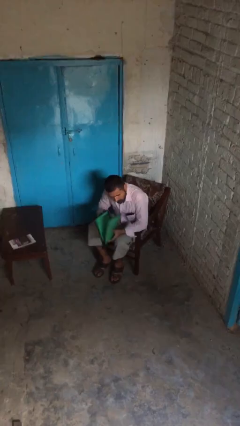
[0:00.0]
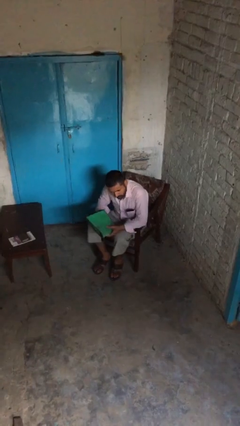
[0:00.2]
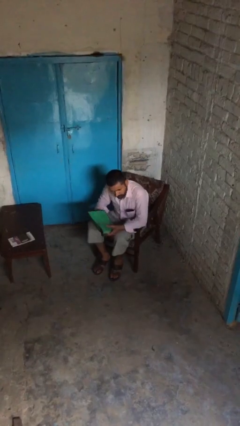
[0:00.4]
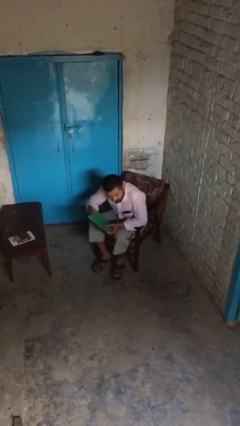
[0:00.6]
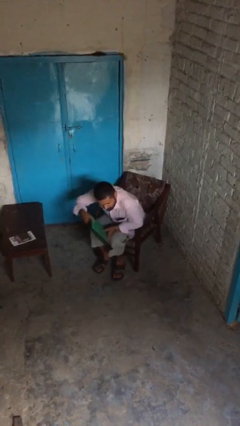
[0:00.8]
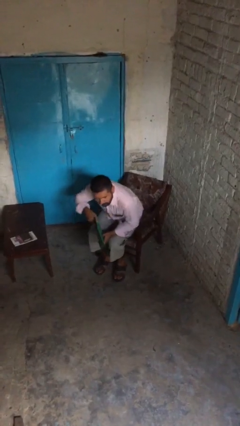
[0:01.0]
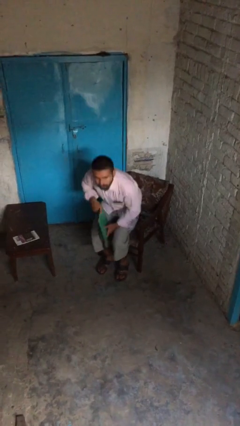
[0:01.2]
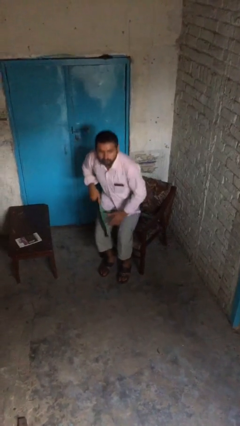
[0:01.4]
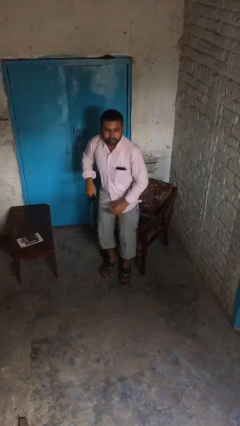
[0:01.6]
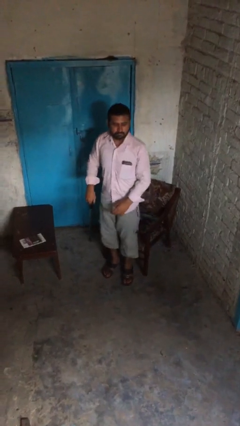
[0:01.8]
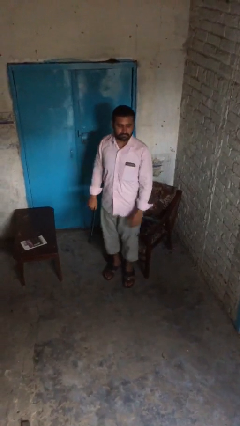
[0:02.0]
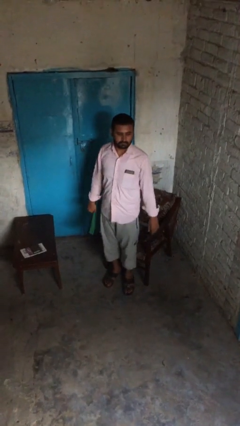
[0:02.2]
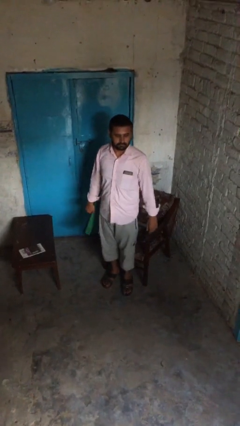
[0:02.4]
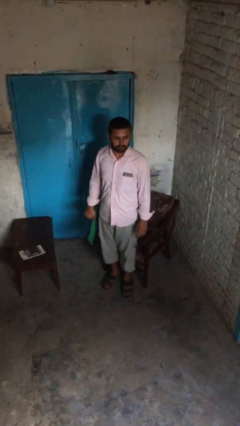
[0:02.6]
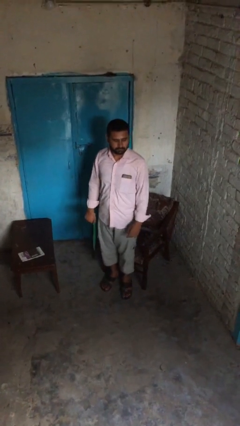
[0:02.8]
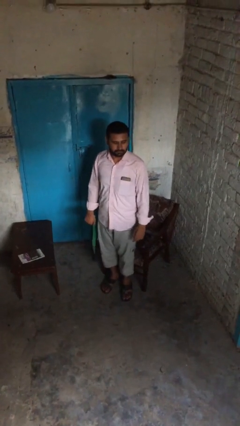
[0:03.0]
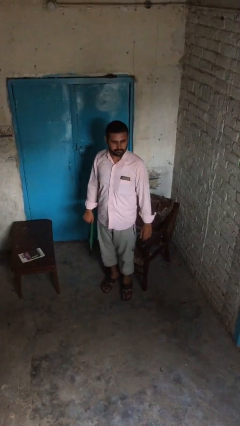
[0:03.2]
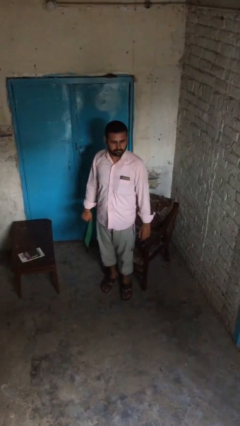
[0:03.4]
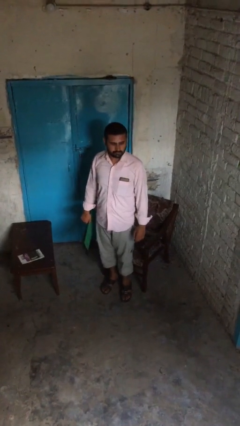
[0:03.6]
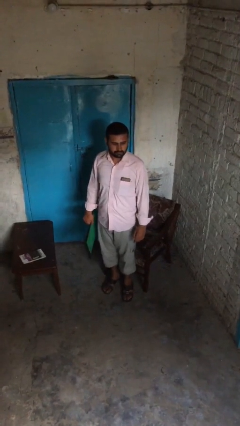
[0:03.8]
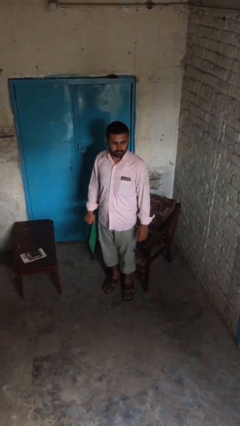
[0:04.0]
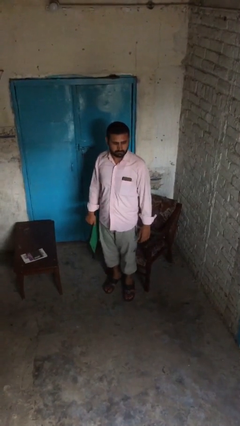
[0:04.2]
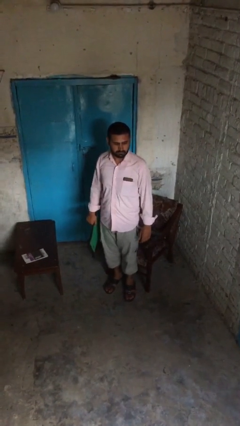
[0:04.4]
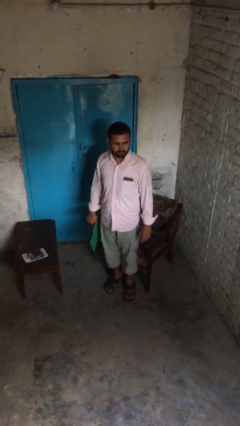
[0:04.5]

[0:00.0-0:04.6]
person stands up

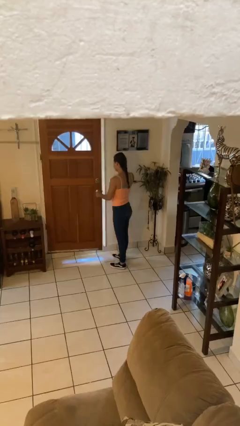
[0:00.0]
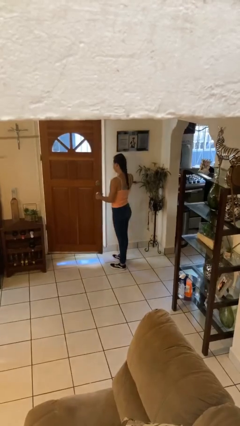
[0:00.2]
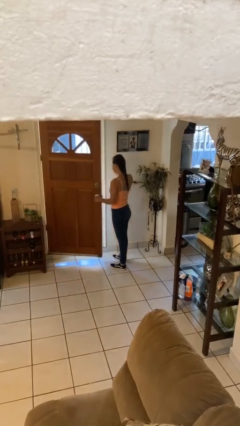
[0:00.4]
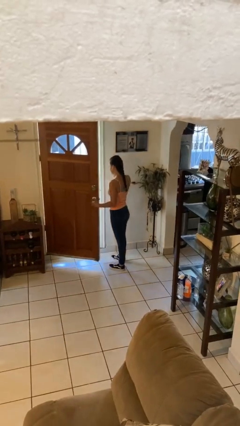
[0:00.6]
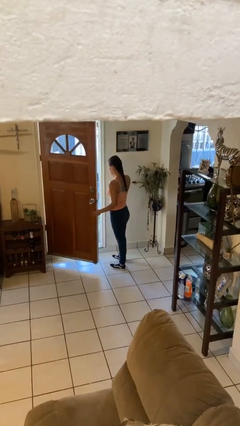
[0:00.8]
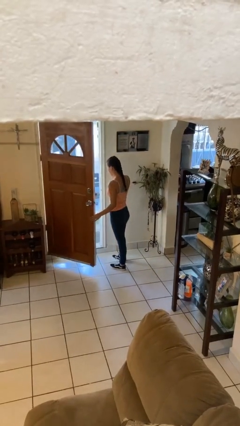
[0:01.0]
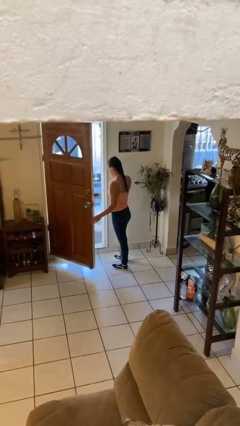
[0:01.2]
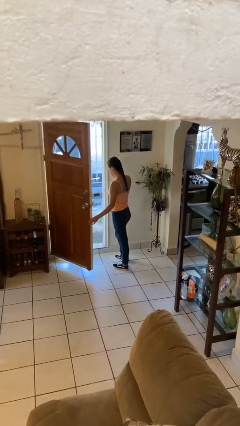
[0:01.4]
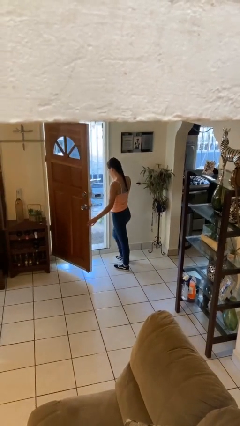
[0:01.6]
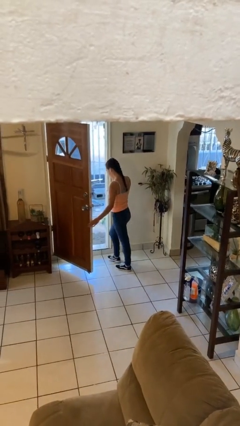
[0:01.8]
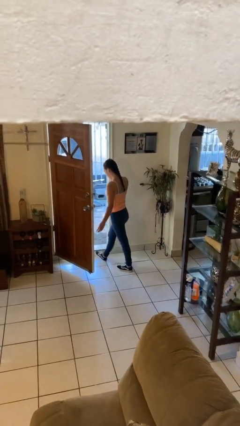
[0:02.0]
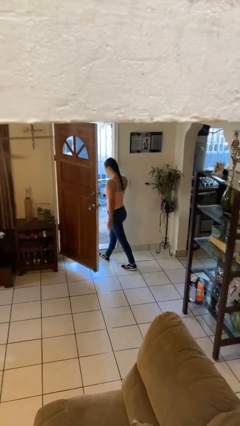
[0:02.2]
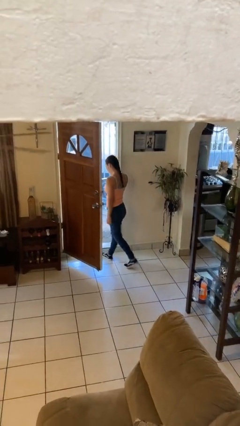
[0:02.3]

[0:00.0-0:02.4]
person opens facility door

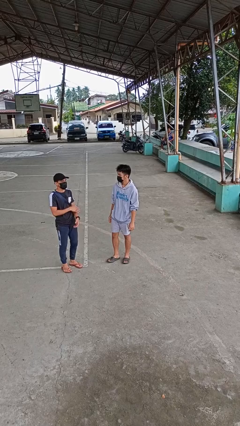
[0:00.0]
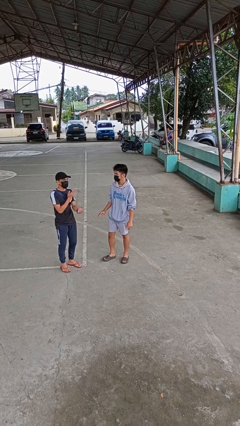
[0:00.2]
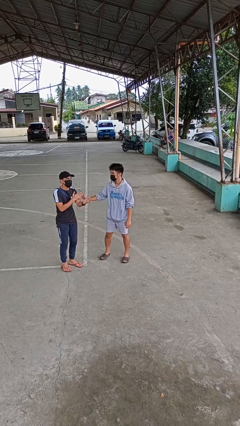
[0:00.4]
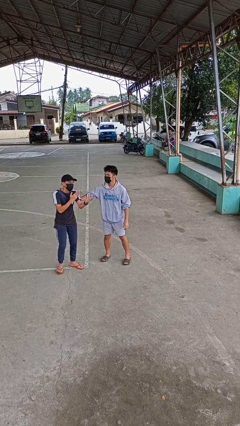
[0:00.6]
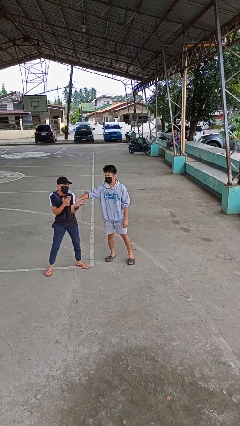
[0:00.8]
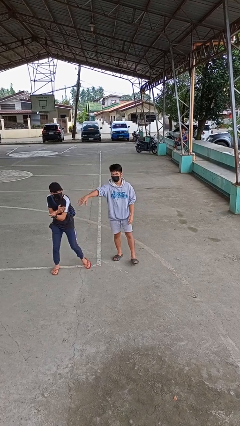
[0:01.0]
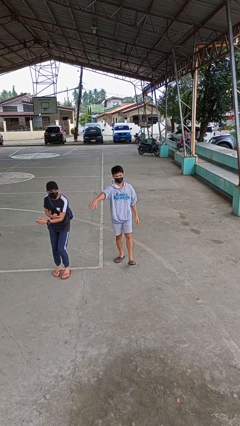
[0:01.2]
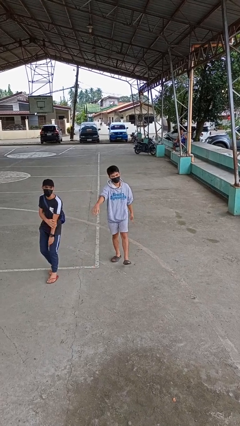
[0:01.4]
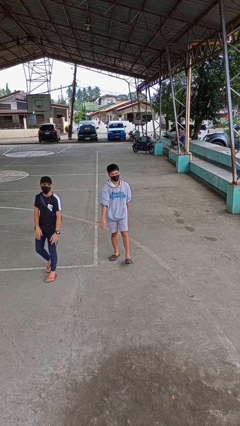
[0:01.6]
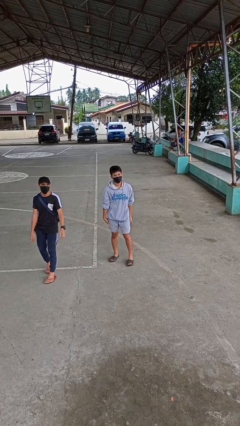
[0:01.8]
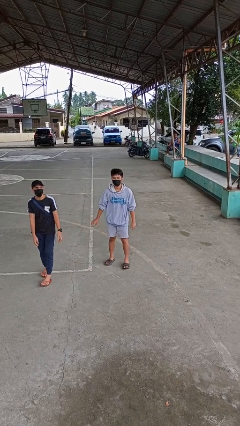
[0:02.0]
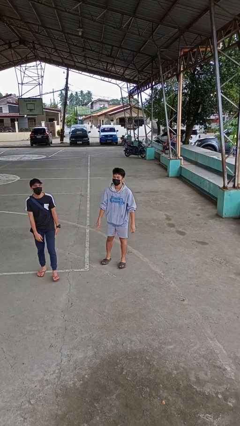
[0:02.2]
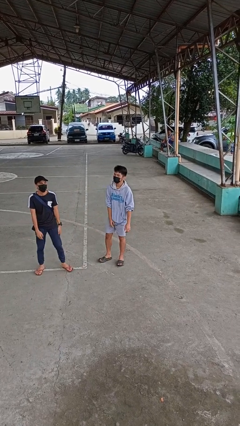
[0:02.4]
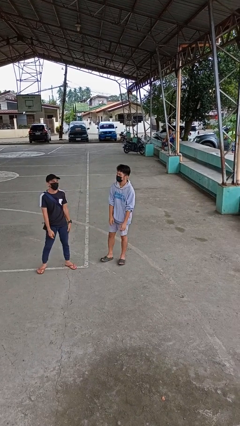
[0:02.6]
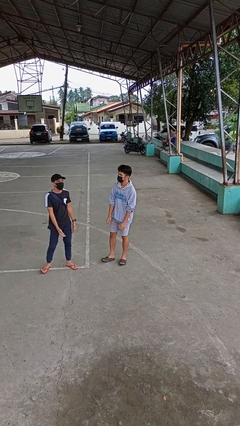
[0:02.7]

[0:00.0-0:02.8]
person shoves person

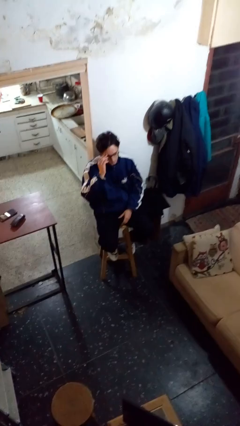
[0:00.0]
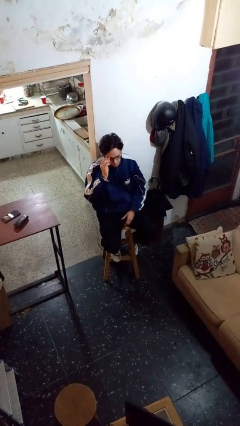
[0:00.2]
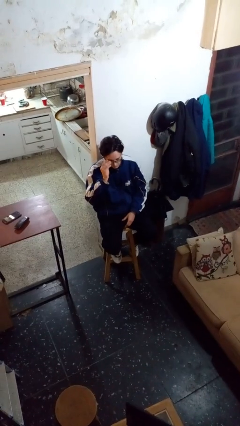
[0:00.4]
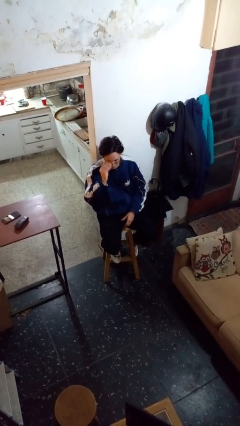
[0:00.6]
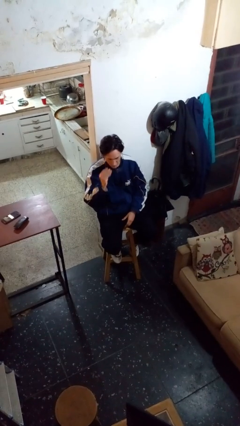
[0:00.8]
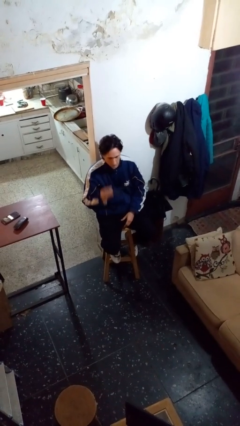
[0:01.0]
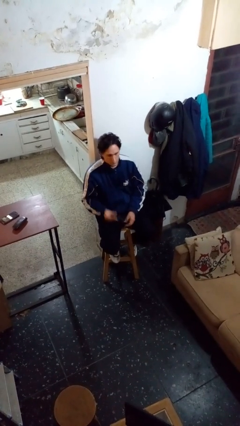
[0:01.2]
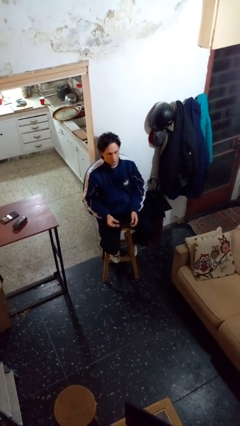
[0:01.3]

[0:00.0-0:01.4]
person takes off glasses

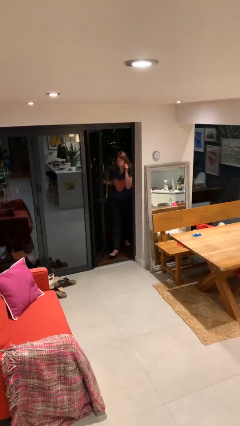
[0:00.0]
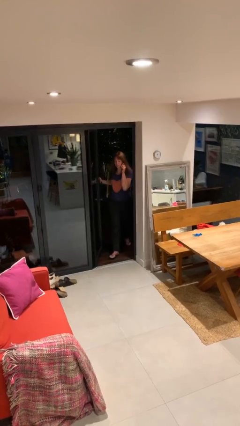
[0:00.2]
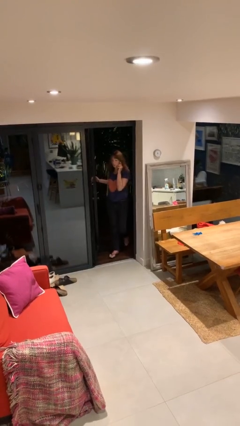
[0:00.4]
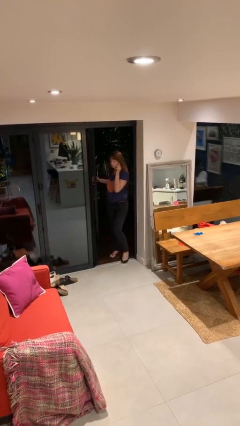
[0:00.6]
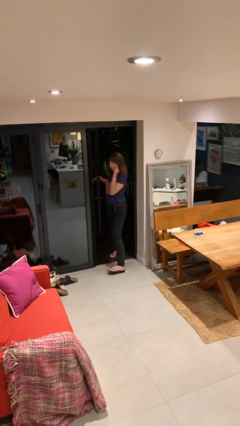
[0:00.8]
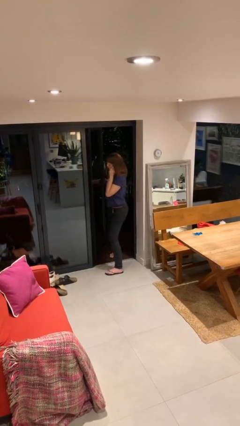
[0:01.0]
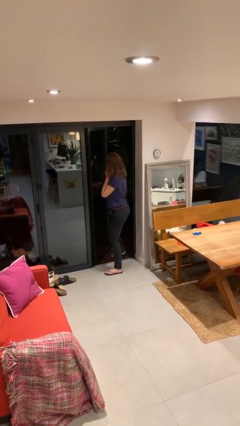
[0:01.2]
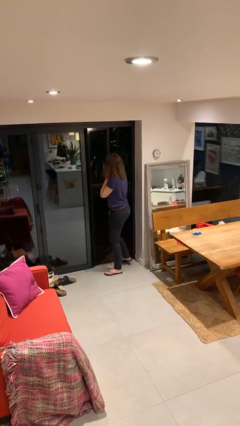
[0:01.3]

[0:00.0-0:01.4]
person enters scene through structure

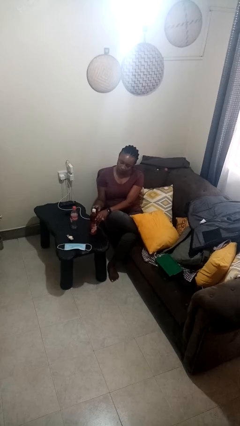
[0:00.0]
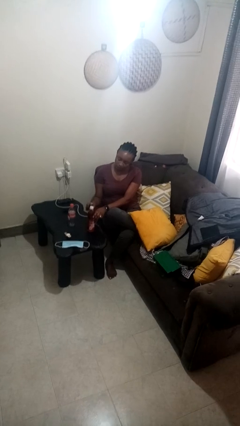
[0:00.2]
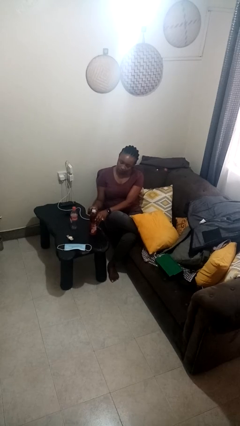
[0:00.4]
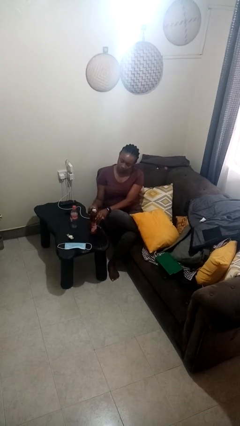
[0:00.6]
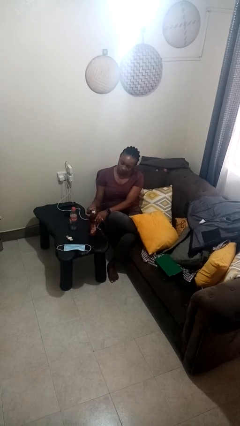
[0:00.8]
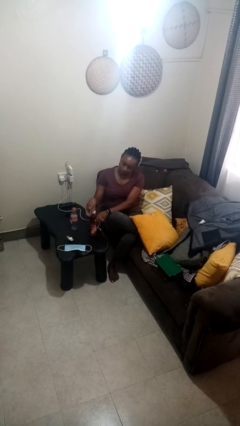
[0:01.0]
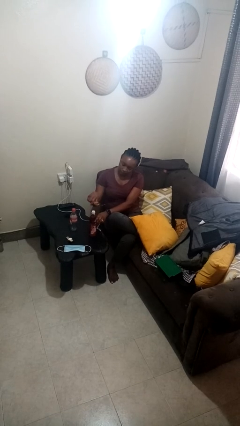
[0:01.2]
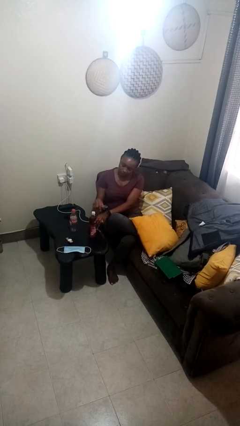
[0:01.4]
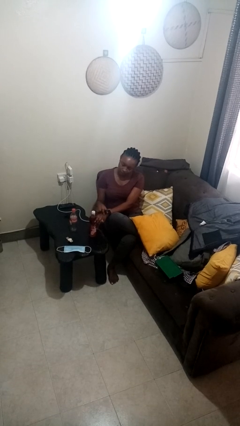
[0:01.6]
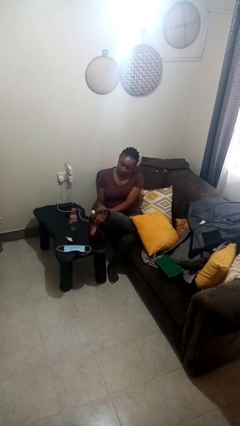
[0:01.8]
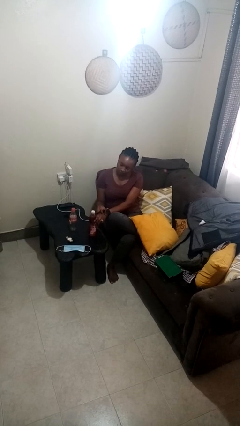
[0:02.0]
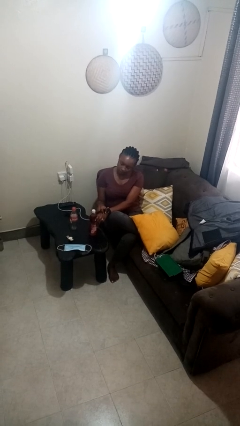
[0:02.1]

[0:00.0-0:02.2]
person opens can with can opener

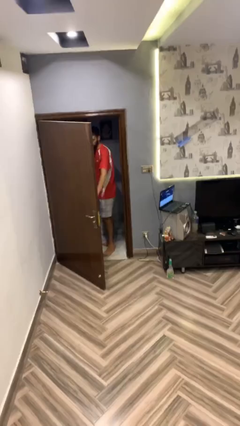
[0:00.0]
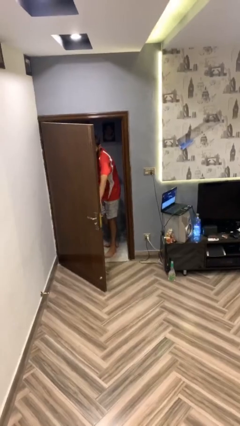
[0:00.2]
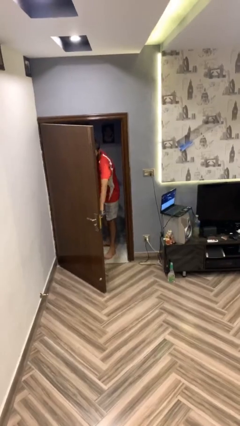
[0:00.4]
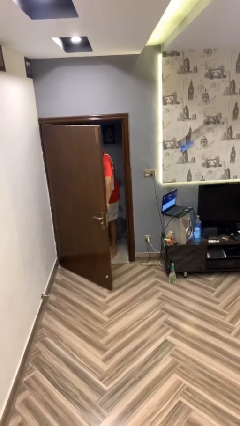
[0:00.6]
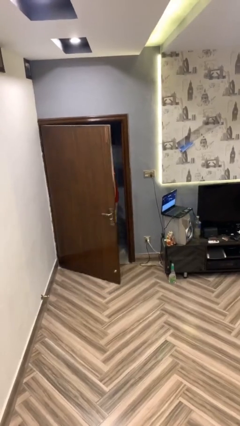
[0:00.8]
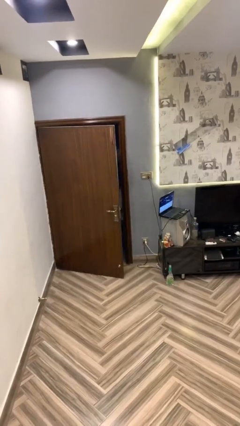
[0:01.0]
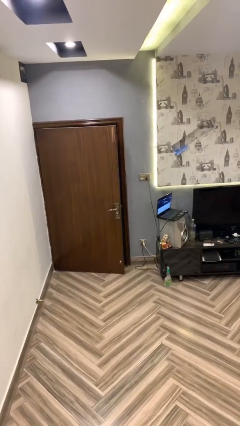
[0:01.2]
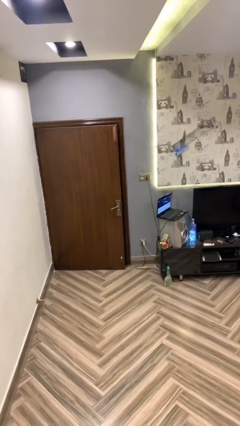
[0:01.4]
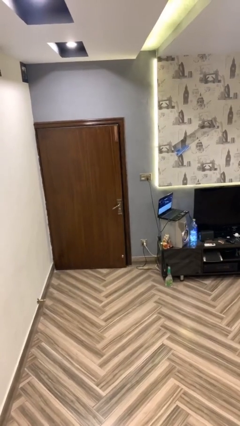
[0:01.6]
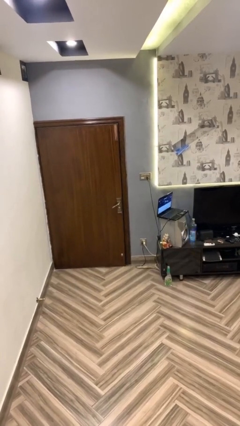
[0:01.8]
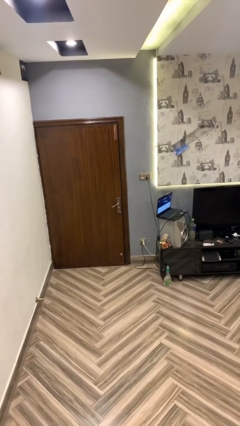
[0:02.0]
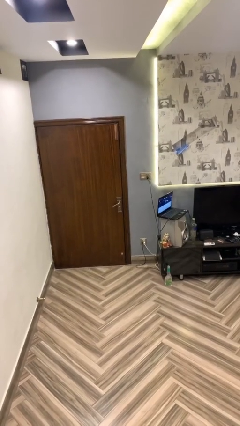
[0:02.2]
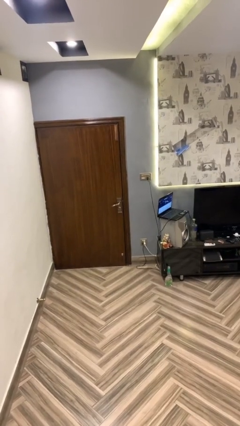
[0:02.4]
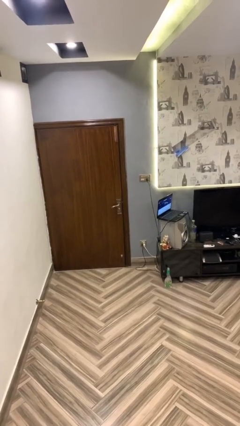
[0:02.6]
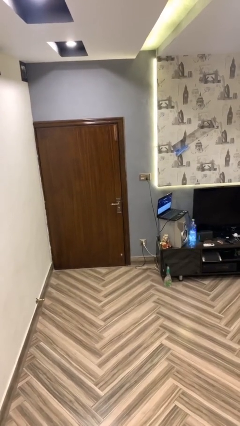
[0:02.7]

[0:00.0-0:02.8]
person closes facility door
